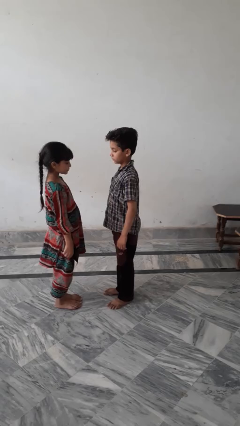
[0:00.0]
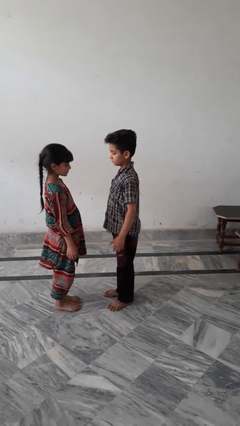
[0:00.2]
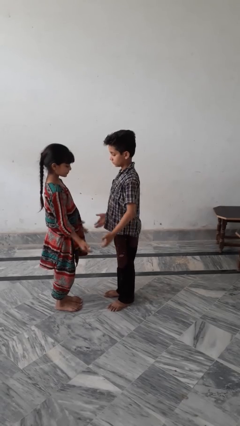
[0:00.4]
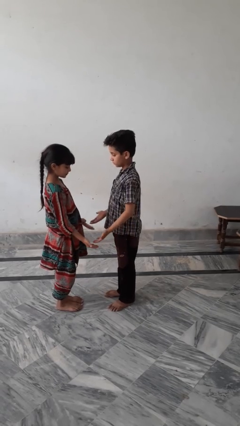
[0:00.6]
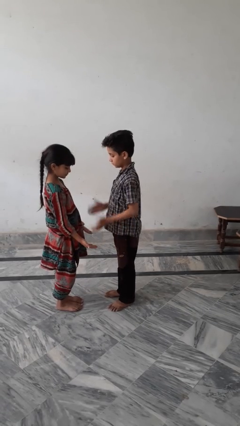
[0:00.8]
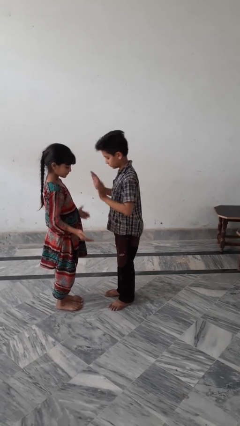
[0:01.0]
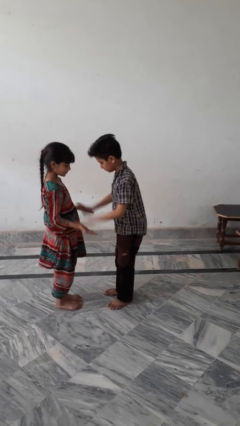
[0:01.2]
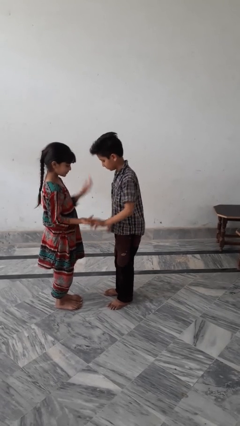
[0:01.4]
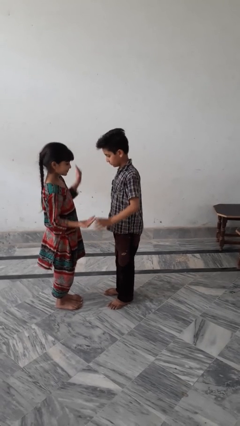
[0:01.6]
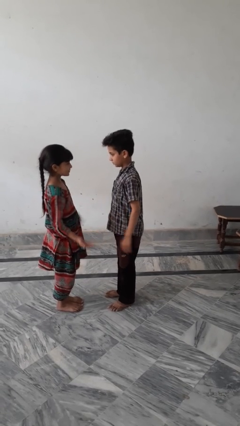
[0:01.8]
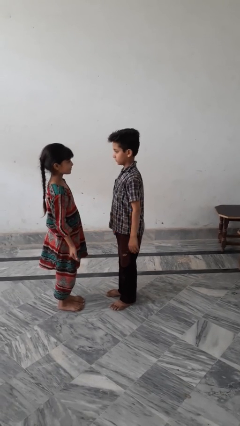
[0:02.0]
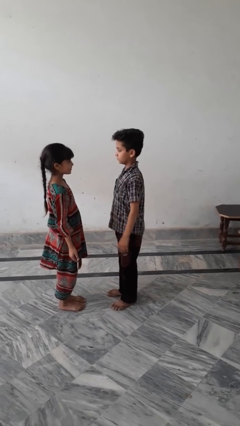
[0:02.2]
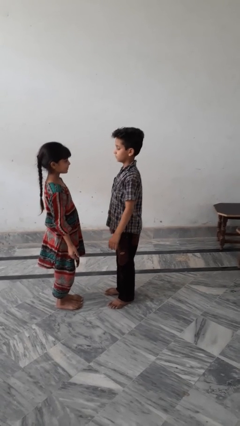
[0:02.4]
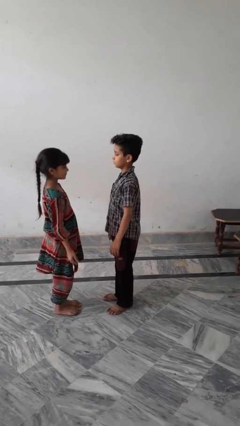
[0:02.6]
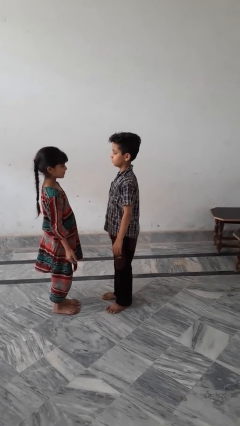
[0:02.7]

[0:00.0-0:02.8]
person highfives hand

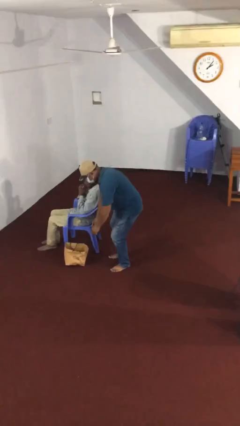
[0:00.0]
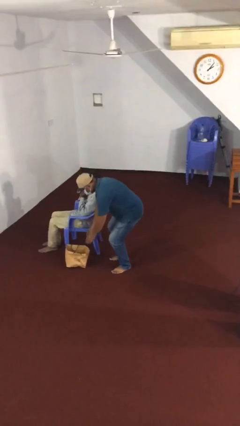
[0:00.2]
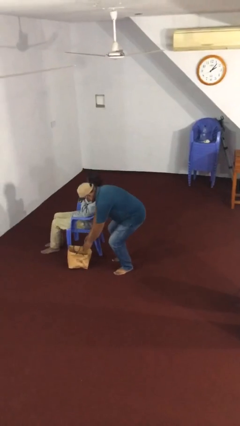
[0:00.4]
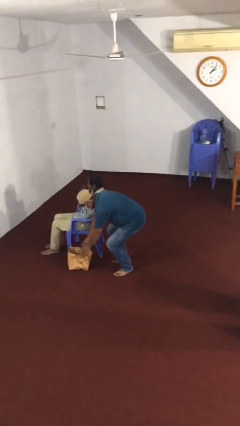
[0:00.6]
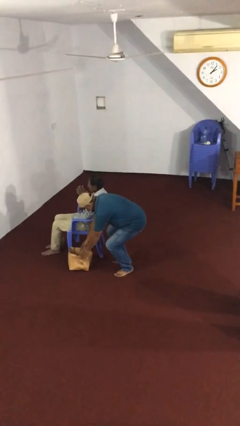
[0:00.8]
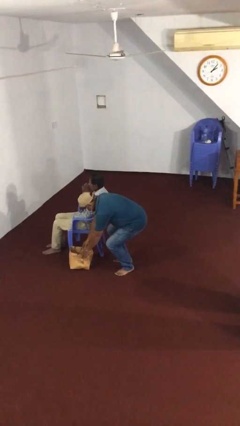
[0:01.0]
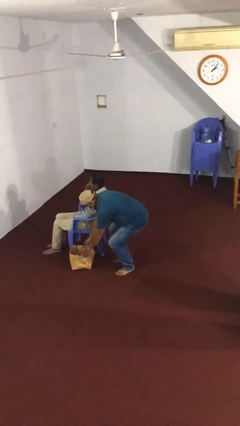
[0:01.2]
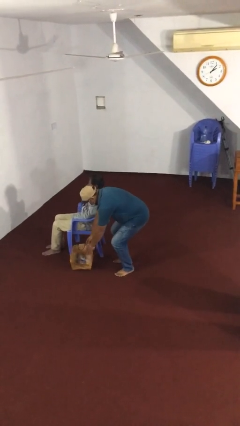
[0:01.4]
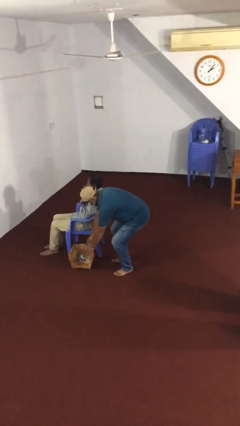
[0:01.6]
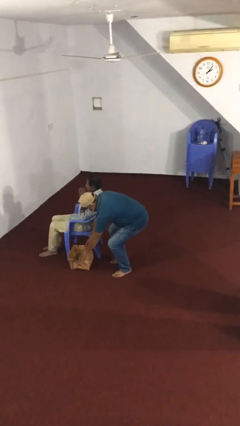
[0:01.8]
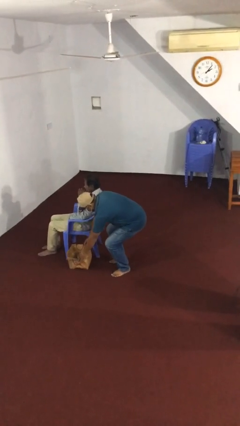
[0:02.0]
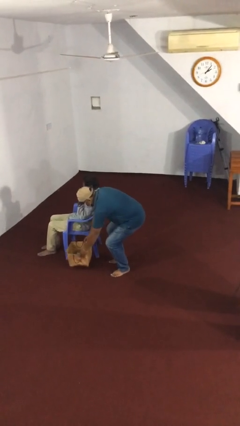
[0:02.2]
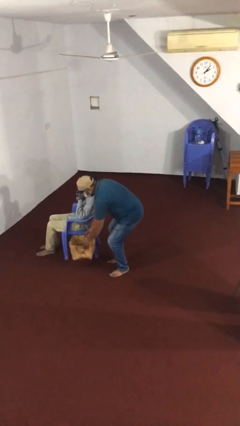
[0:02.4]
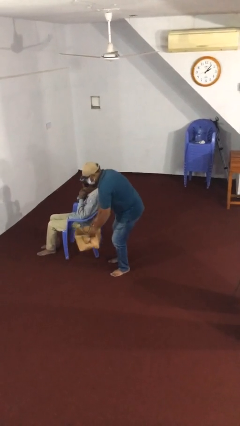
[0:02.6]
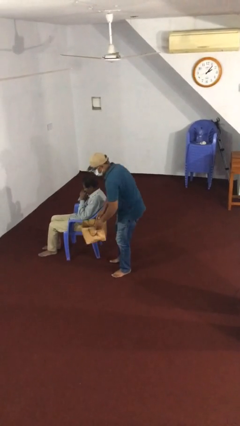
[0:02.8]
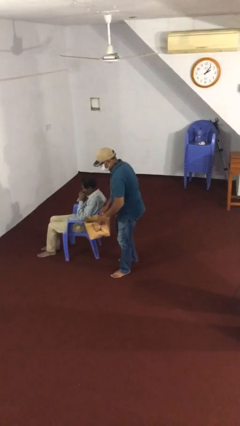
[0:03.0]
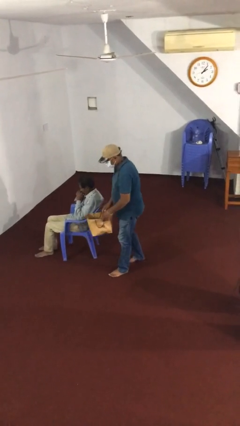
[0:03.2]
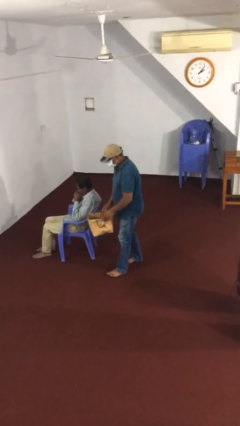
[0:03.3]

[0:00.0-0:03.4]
person steals object from person

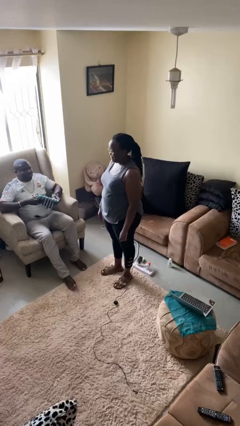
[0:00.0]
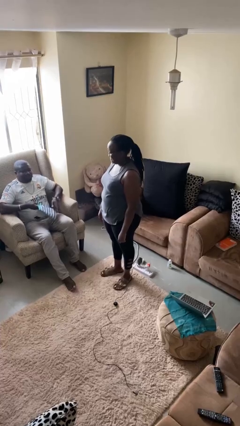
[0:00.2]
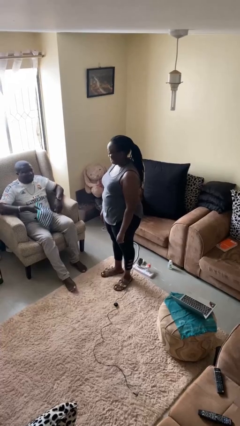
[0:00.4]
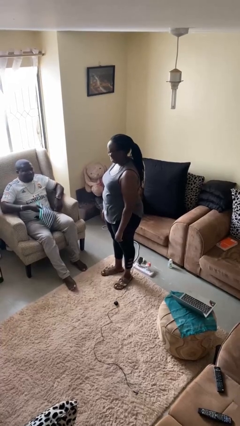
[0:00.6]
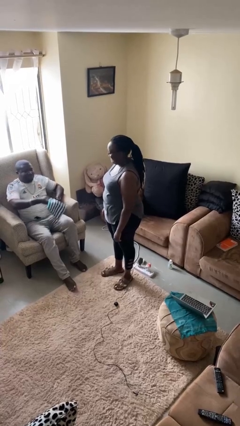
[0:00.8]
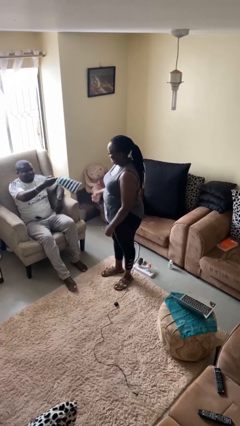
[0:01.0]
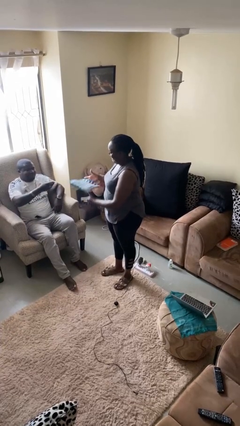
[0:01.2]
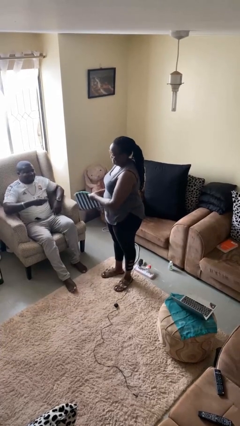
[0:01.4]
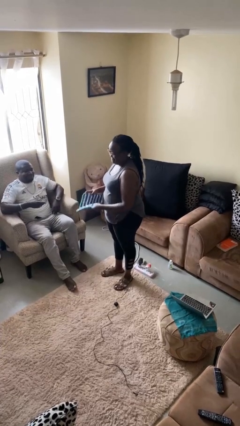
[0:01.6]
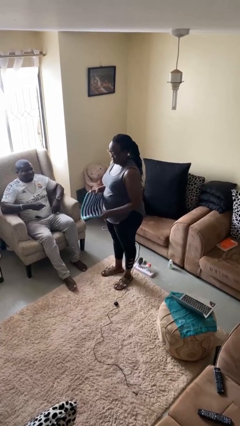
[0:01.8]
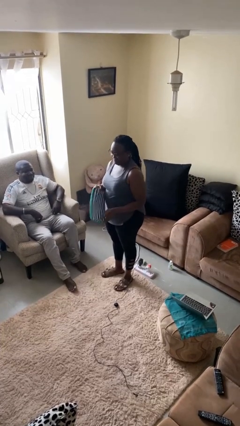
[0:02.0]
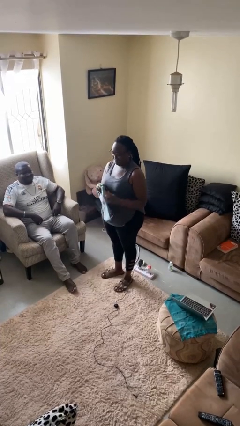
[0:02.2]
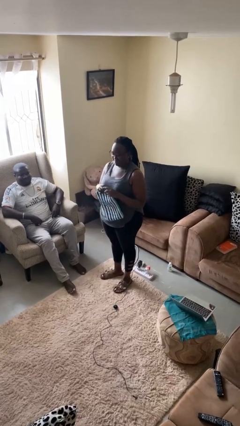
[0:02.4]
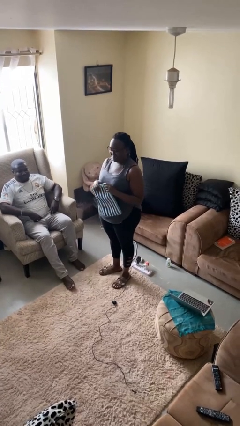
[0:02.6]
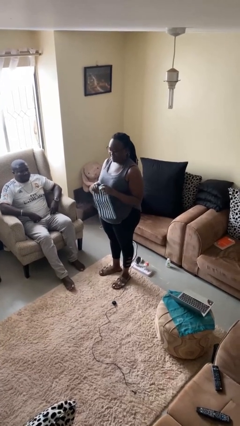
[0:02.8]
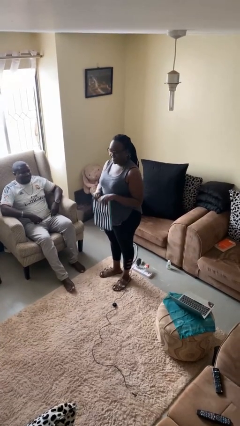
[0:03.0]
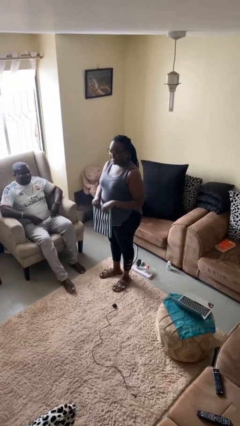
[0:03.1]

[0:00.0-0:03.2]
person catches object from person

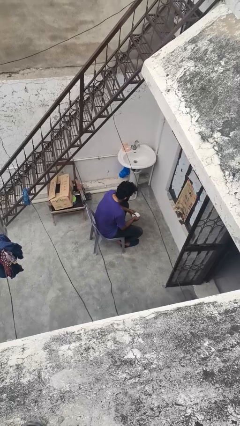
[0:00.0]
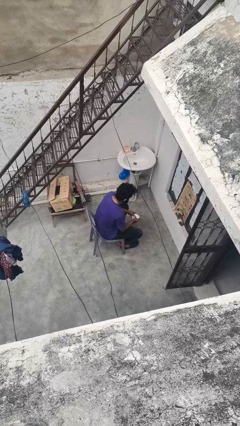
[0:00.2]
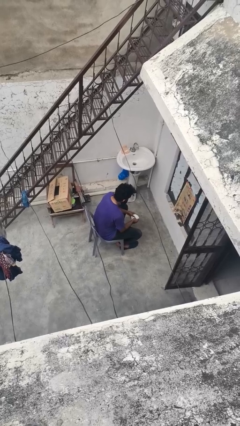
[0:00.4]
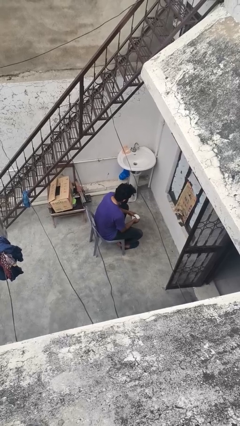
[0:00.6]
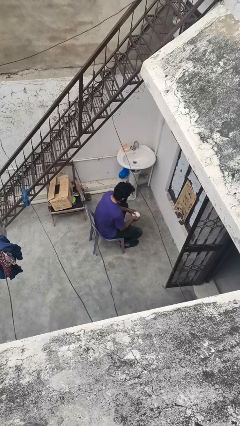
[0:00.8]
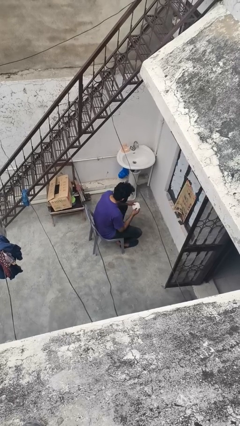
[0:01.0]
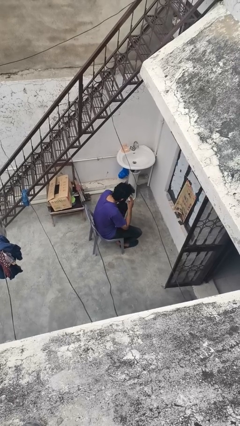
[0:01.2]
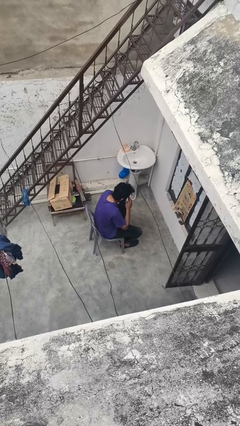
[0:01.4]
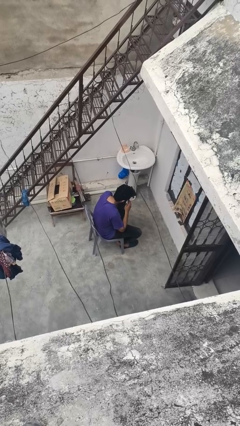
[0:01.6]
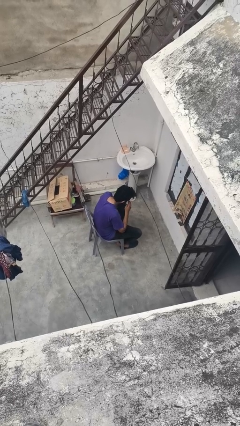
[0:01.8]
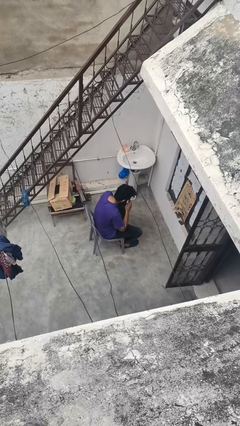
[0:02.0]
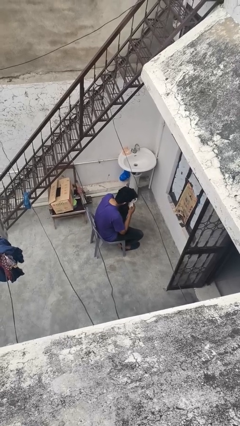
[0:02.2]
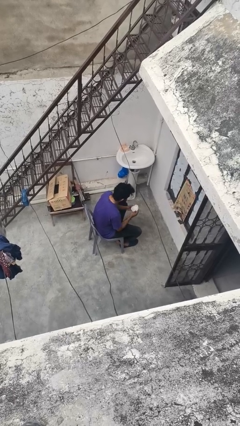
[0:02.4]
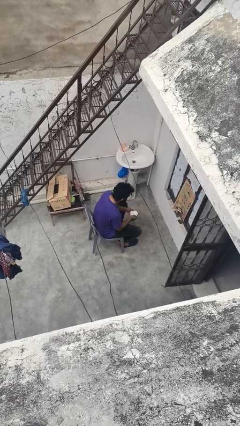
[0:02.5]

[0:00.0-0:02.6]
person blows nose

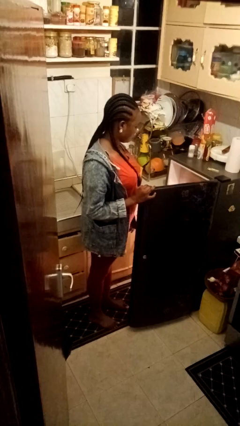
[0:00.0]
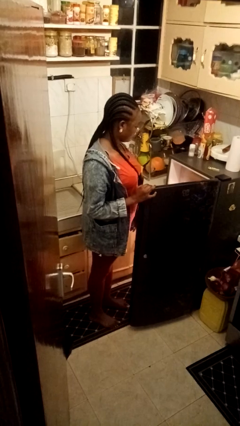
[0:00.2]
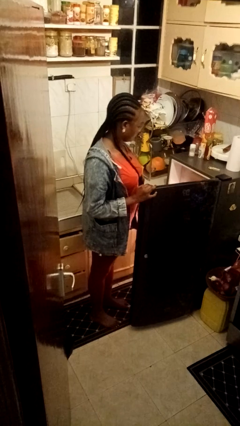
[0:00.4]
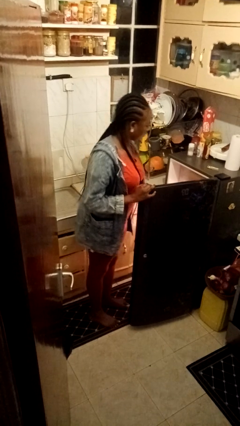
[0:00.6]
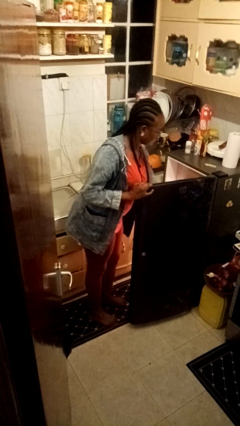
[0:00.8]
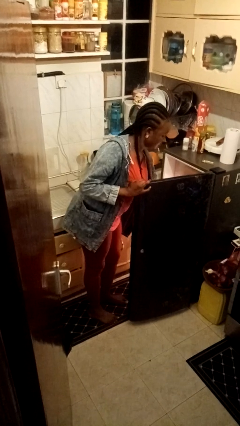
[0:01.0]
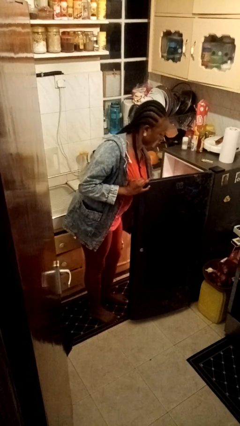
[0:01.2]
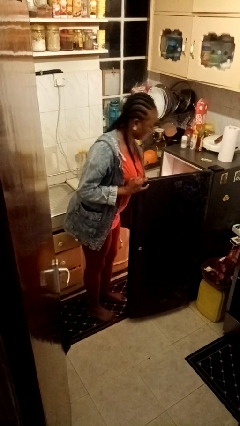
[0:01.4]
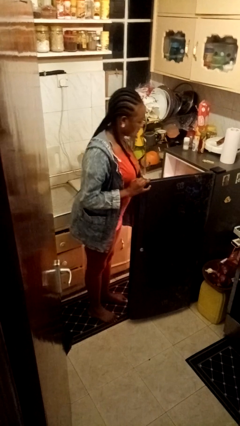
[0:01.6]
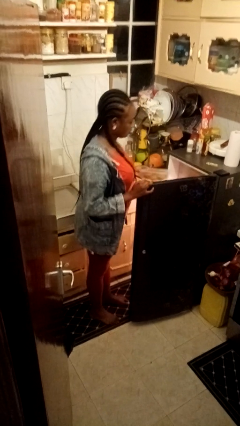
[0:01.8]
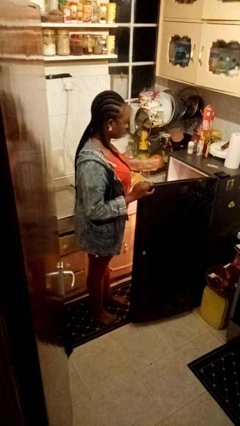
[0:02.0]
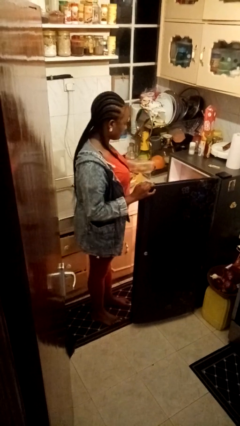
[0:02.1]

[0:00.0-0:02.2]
person takes object from refrigerator

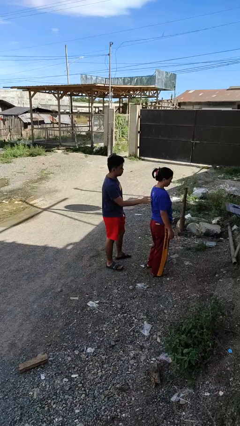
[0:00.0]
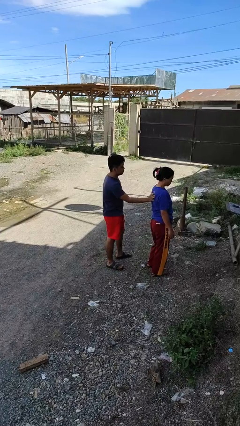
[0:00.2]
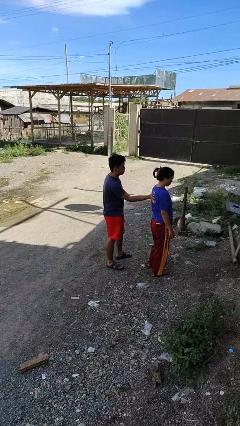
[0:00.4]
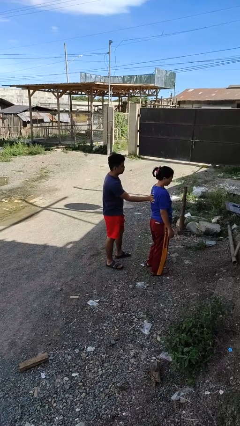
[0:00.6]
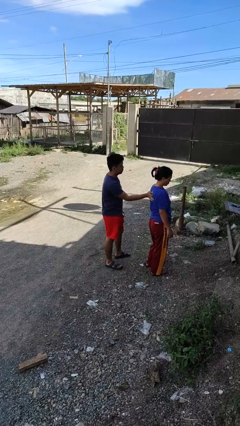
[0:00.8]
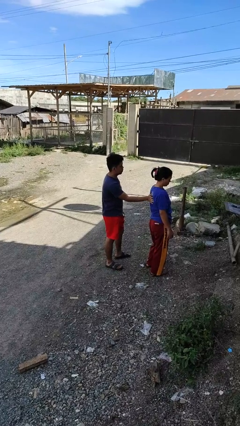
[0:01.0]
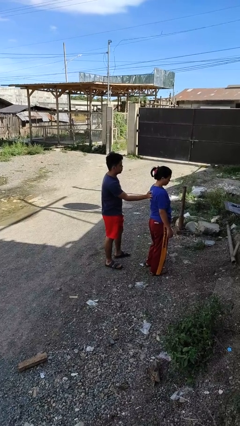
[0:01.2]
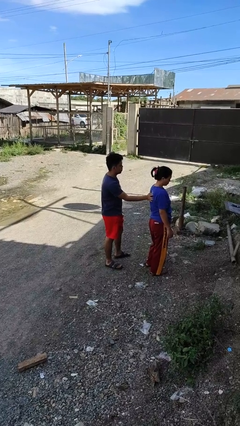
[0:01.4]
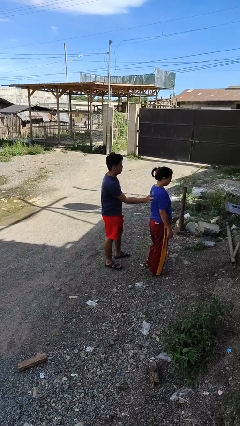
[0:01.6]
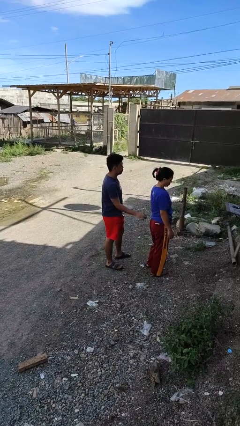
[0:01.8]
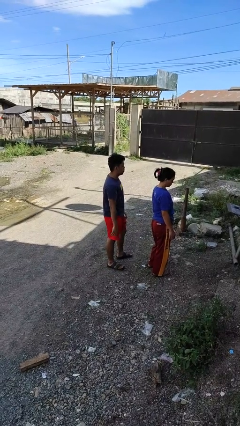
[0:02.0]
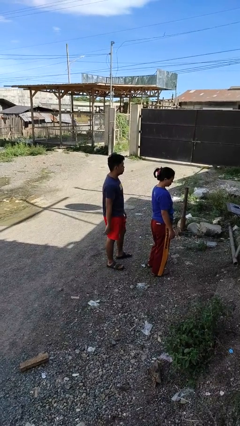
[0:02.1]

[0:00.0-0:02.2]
person touches back of person

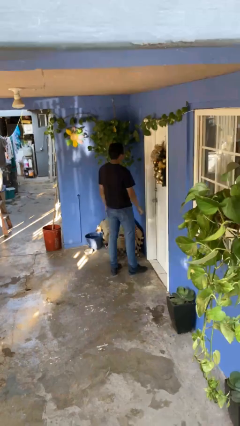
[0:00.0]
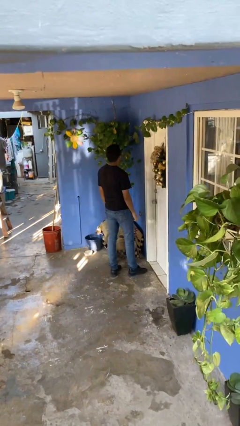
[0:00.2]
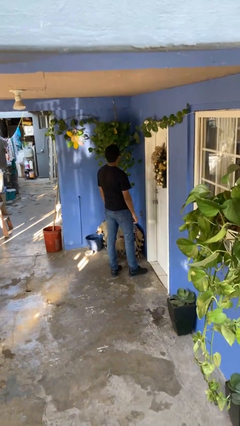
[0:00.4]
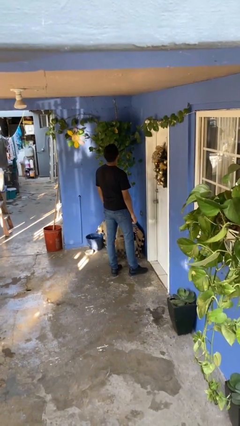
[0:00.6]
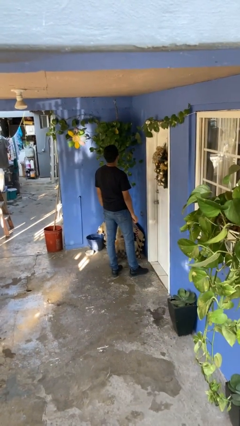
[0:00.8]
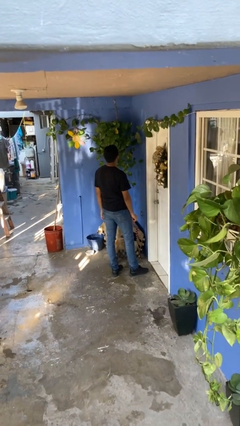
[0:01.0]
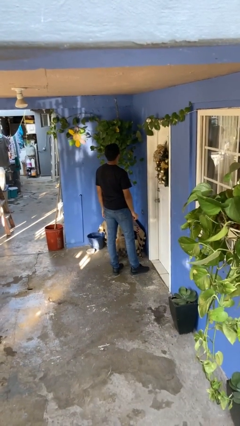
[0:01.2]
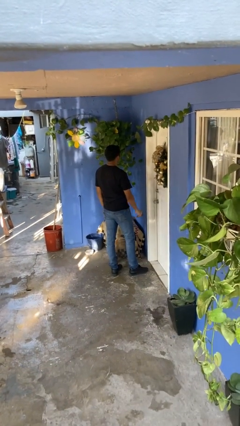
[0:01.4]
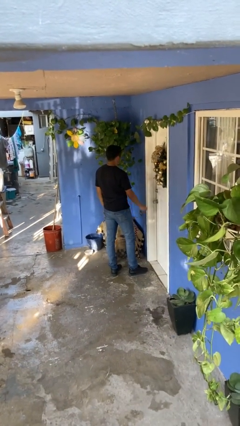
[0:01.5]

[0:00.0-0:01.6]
person closes facility door
